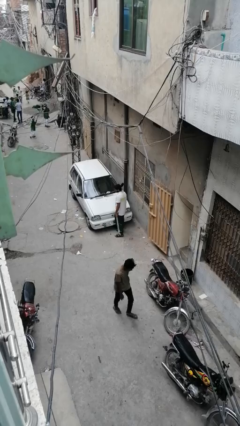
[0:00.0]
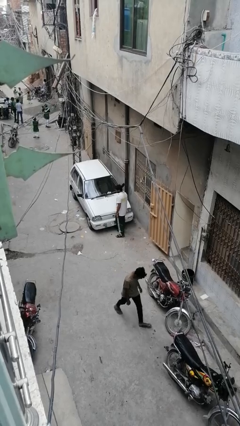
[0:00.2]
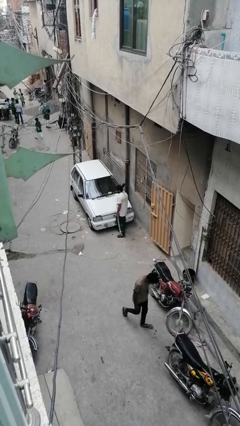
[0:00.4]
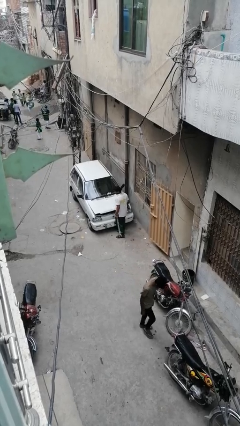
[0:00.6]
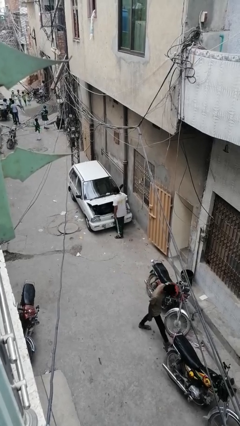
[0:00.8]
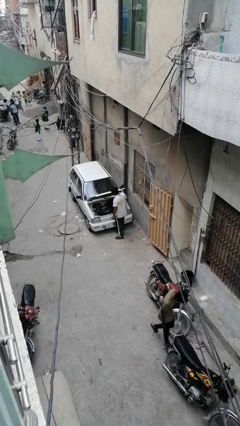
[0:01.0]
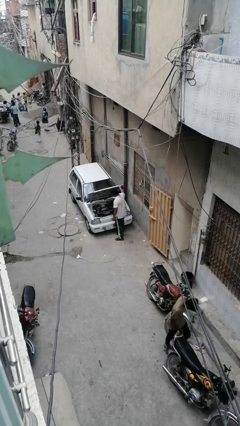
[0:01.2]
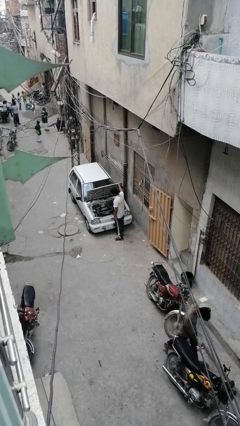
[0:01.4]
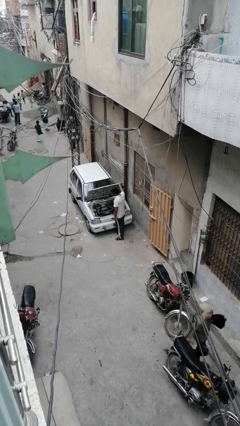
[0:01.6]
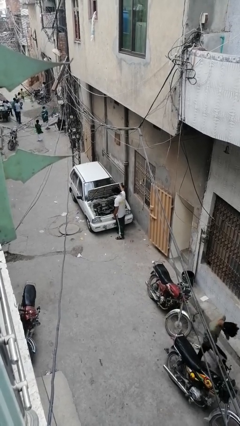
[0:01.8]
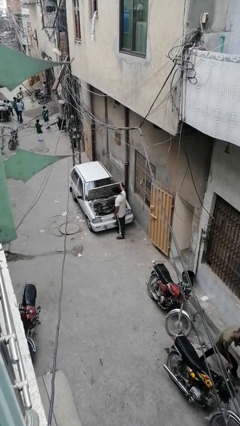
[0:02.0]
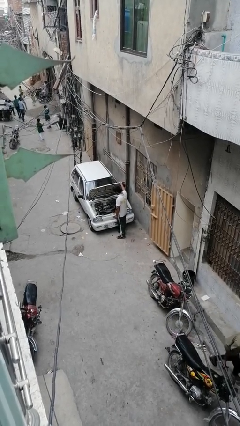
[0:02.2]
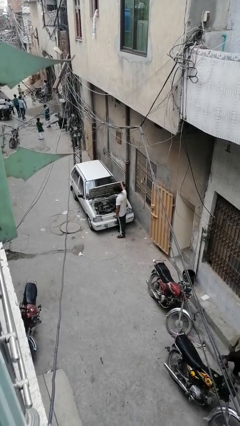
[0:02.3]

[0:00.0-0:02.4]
person opens car hood

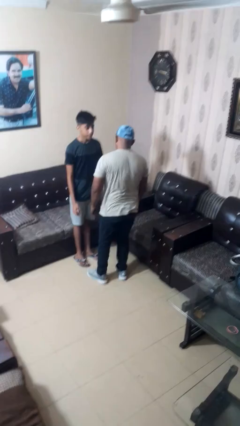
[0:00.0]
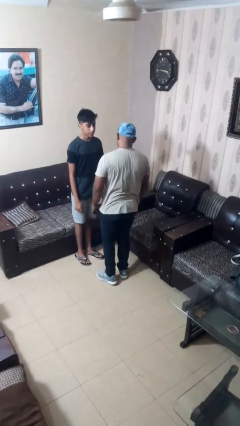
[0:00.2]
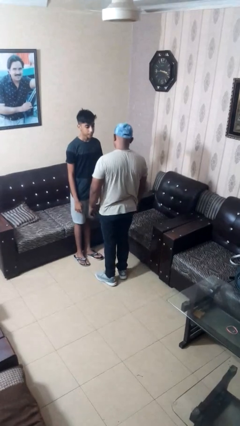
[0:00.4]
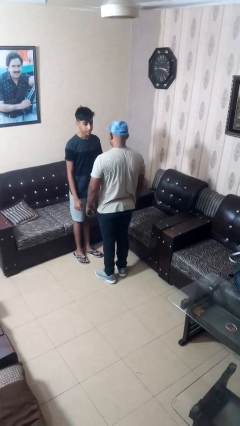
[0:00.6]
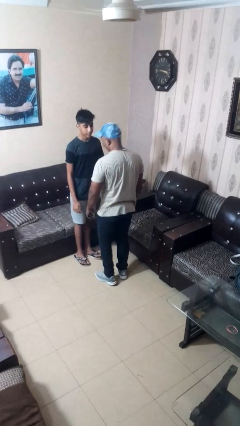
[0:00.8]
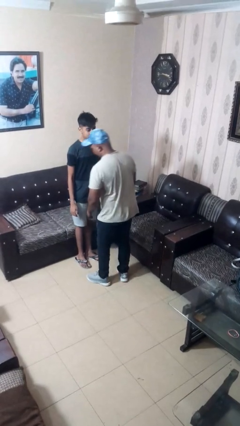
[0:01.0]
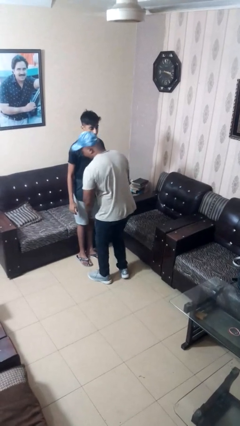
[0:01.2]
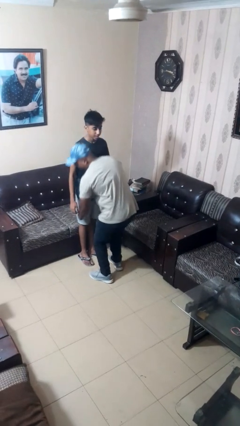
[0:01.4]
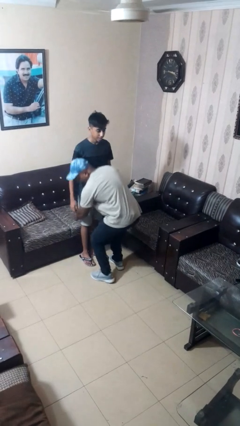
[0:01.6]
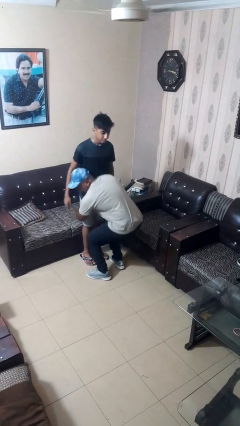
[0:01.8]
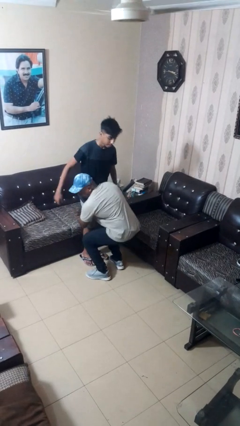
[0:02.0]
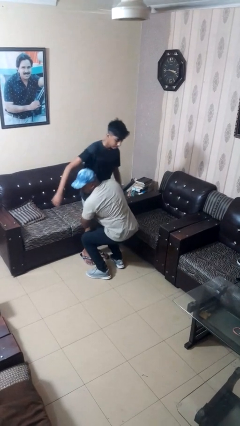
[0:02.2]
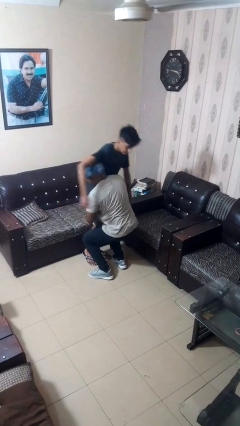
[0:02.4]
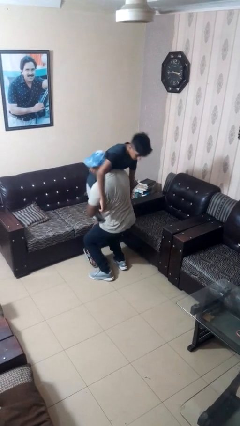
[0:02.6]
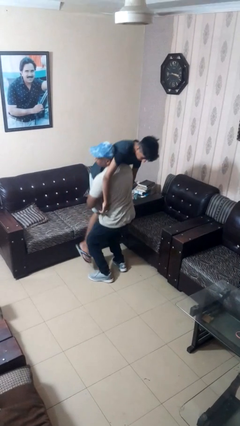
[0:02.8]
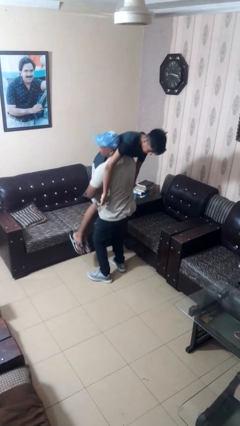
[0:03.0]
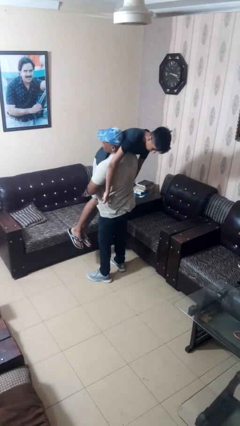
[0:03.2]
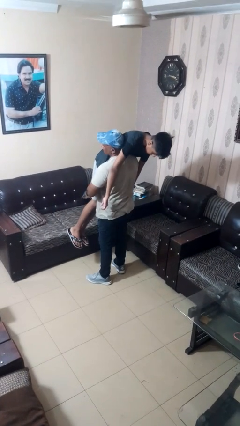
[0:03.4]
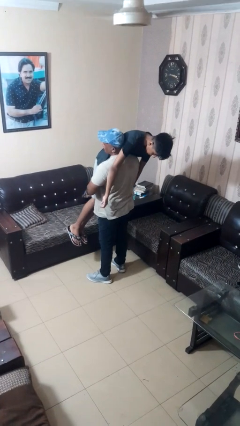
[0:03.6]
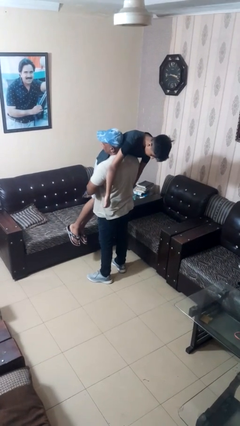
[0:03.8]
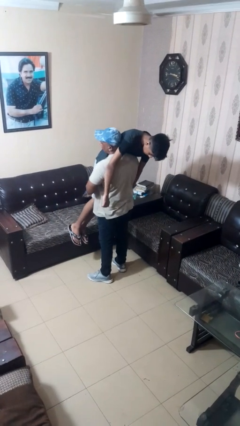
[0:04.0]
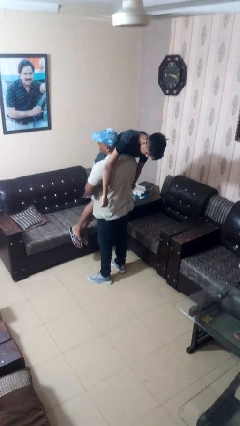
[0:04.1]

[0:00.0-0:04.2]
person picks up person

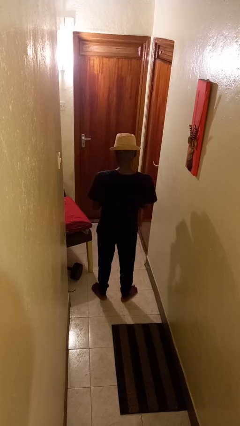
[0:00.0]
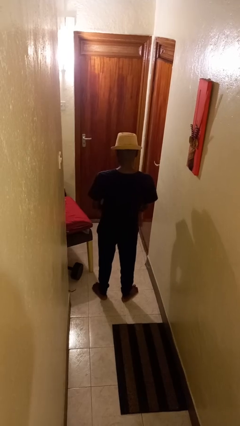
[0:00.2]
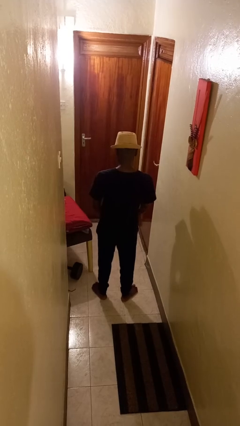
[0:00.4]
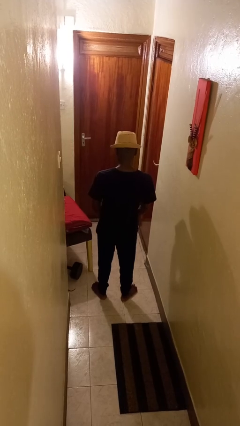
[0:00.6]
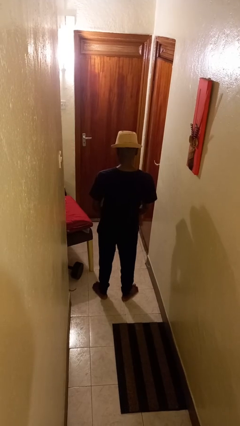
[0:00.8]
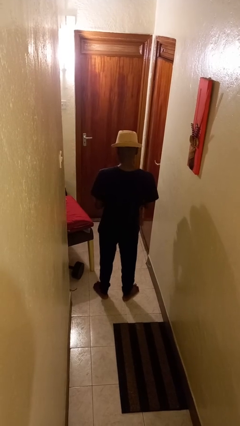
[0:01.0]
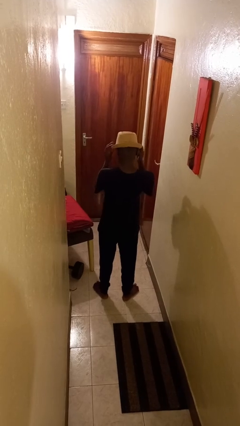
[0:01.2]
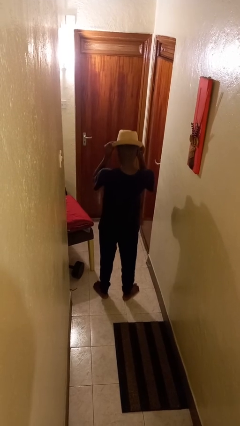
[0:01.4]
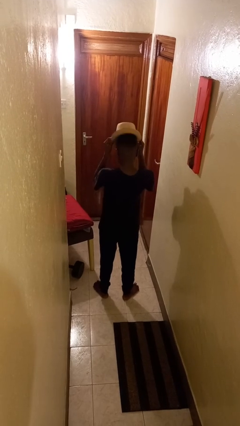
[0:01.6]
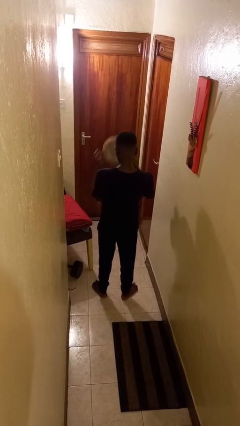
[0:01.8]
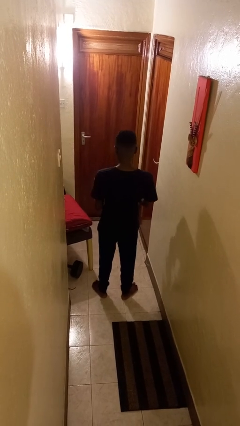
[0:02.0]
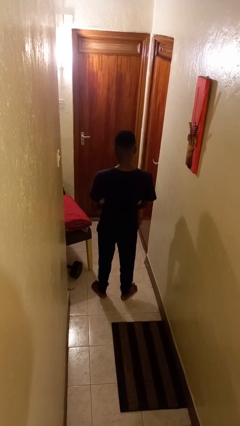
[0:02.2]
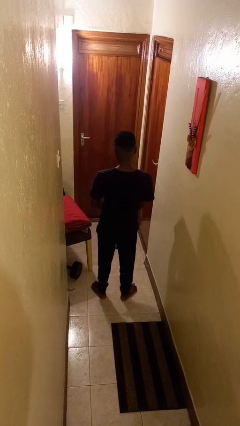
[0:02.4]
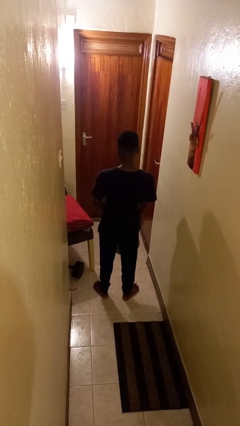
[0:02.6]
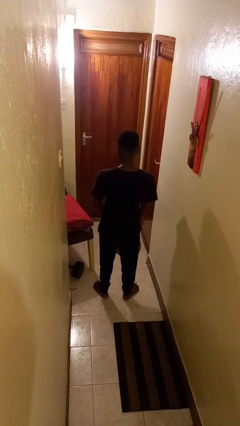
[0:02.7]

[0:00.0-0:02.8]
person takes off hat

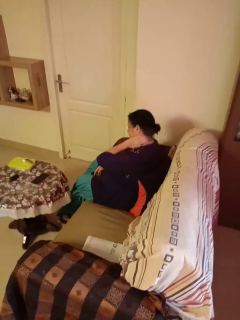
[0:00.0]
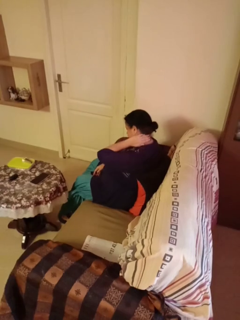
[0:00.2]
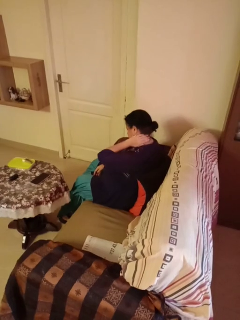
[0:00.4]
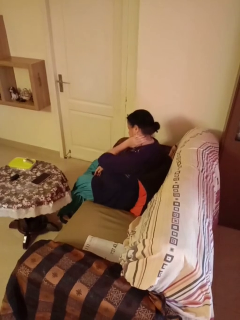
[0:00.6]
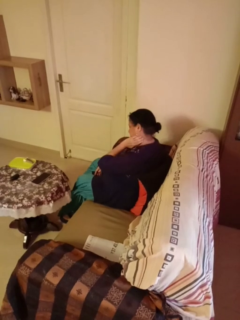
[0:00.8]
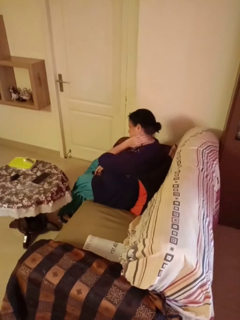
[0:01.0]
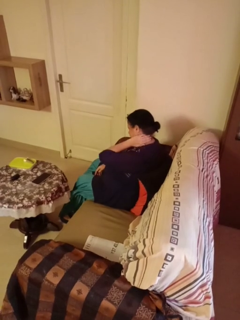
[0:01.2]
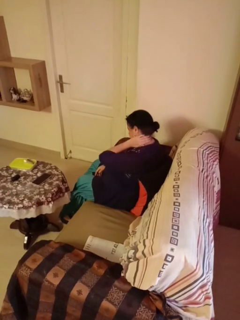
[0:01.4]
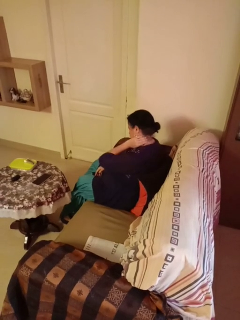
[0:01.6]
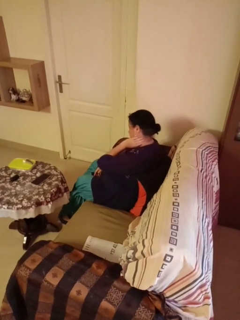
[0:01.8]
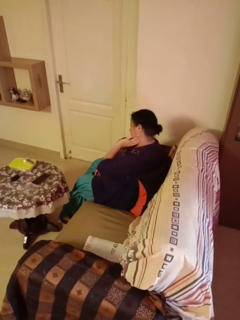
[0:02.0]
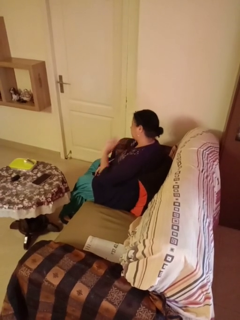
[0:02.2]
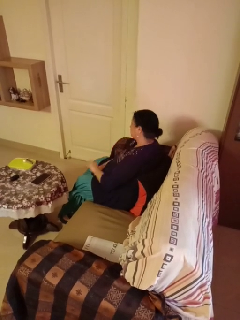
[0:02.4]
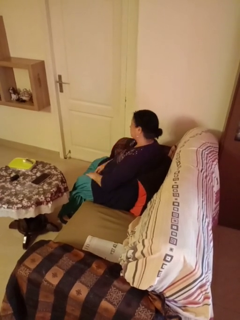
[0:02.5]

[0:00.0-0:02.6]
person rubs neck

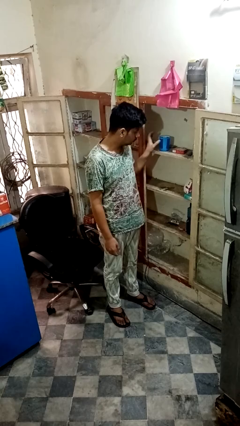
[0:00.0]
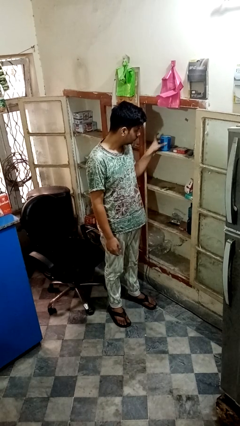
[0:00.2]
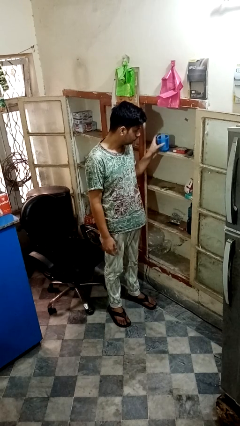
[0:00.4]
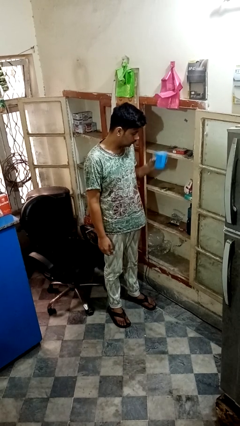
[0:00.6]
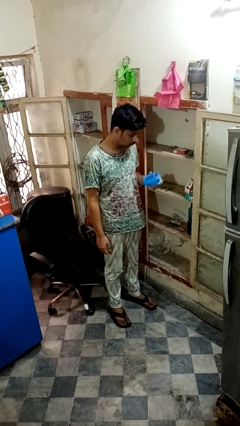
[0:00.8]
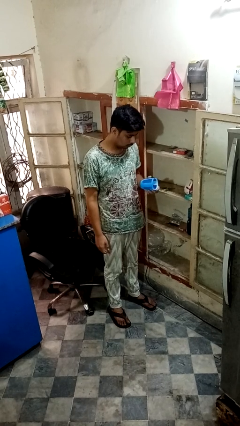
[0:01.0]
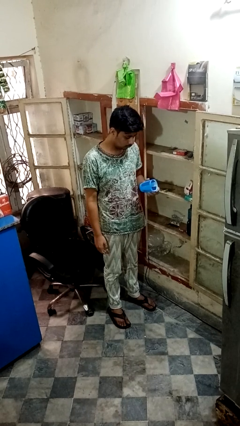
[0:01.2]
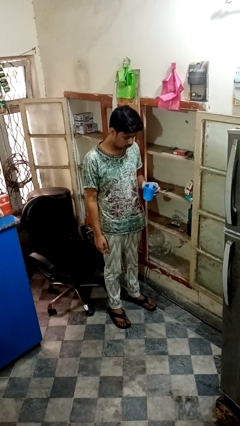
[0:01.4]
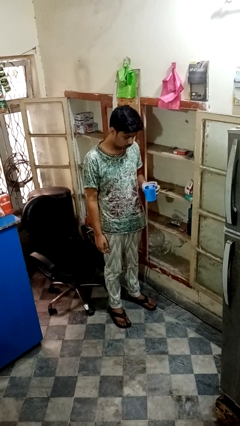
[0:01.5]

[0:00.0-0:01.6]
person takes object from cabinet

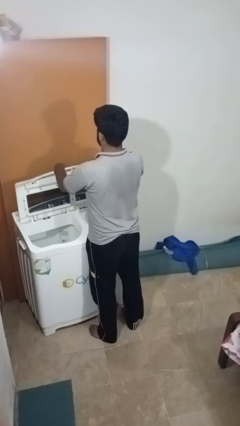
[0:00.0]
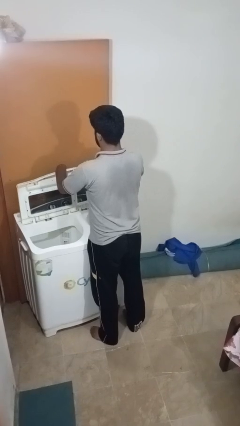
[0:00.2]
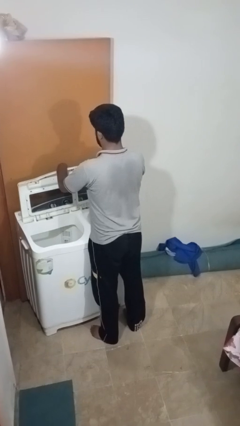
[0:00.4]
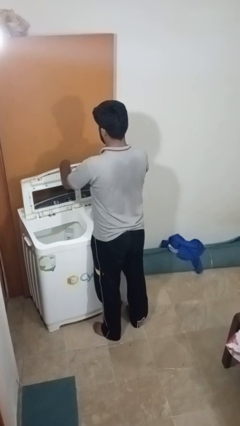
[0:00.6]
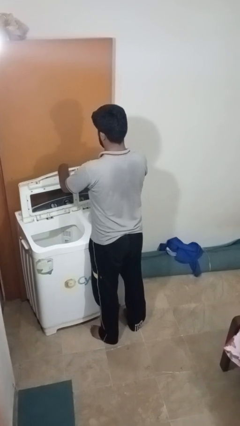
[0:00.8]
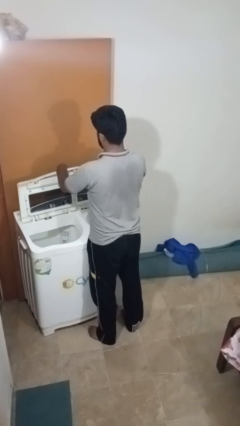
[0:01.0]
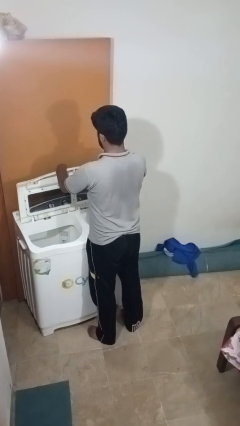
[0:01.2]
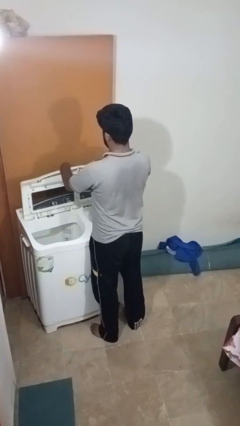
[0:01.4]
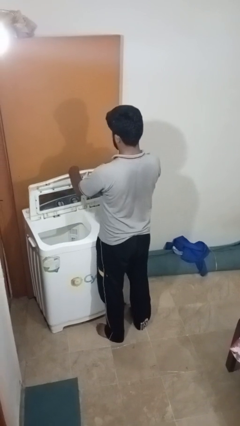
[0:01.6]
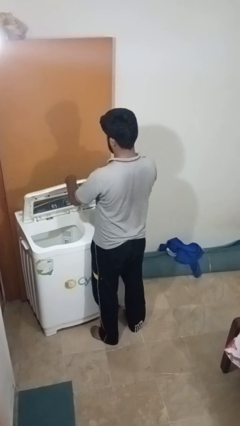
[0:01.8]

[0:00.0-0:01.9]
person opens clothes washer

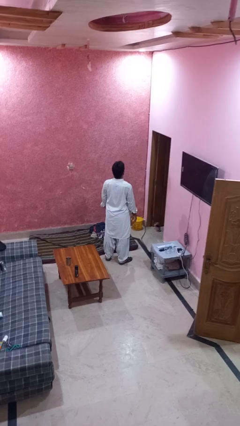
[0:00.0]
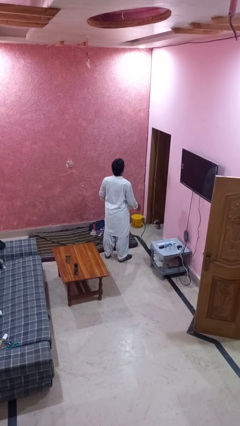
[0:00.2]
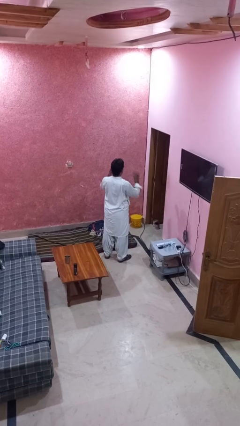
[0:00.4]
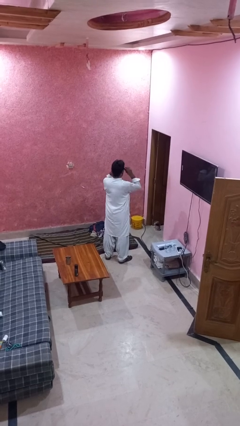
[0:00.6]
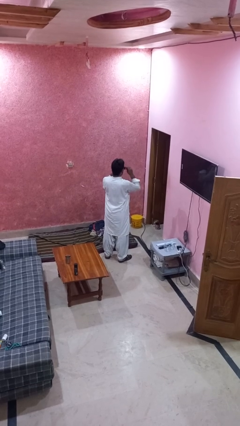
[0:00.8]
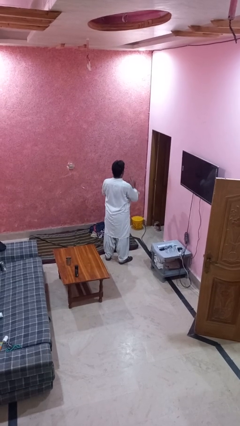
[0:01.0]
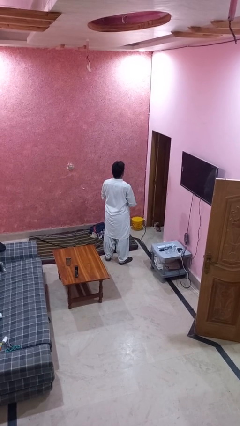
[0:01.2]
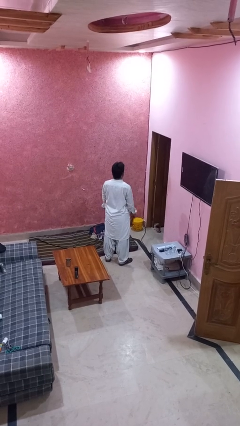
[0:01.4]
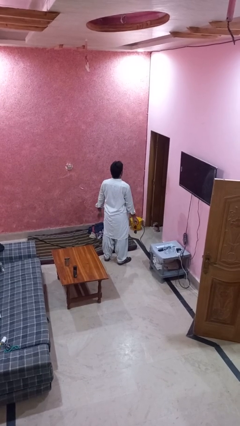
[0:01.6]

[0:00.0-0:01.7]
person takes off sunglasses

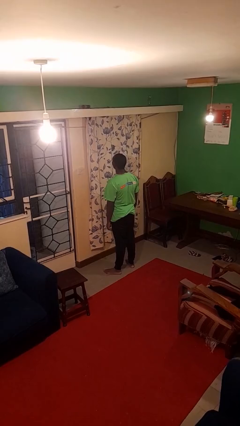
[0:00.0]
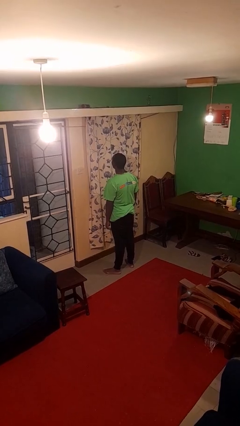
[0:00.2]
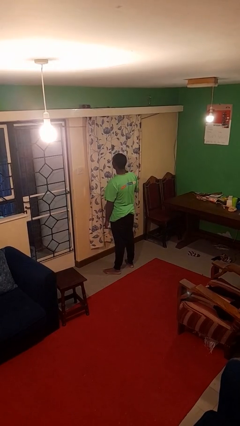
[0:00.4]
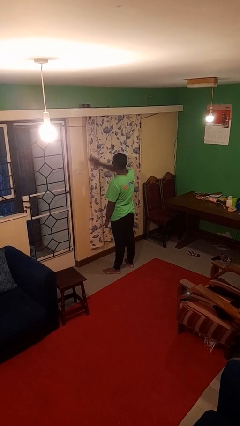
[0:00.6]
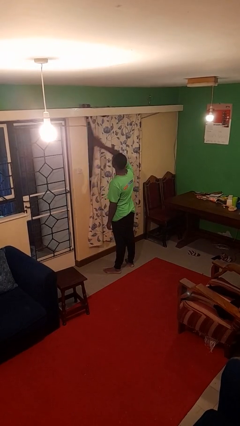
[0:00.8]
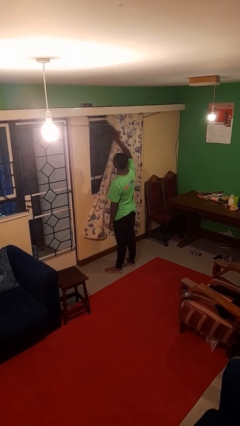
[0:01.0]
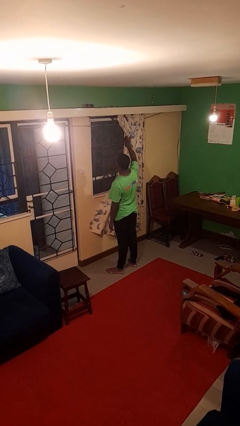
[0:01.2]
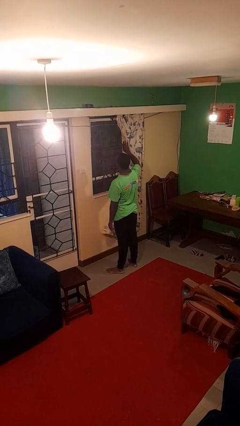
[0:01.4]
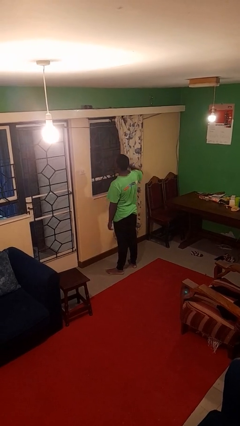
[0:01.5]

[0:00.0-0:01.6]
person opens curtains
